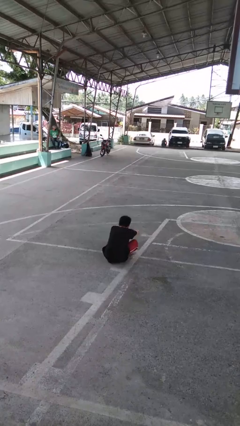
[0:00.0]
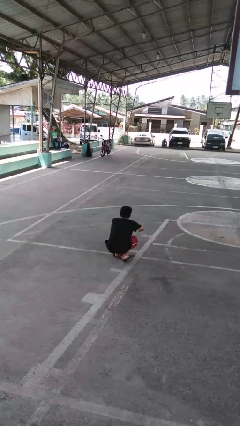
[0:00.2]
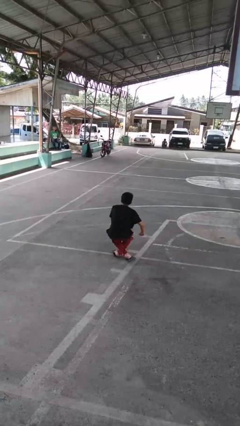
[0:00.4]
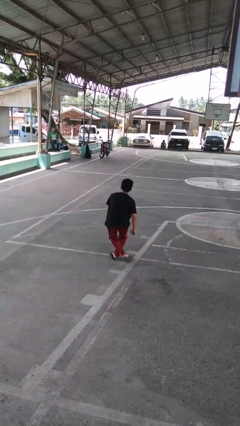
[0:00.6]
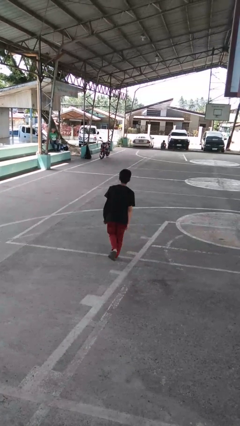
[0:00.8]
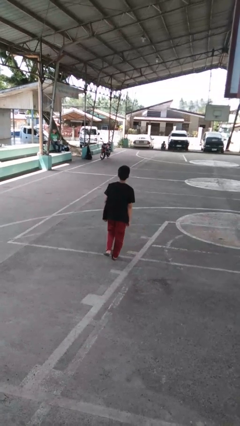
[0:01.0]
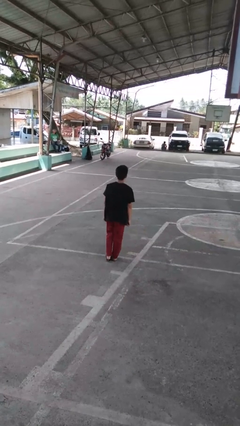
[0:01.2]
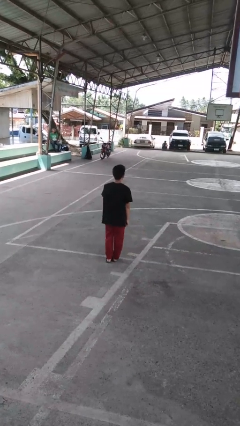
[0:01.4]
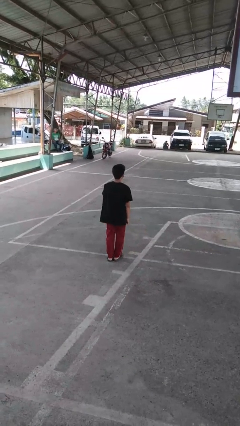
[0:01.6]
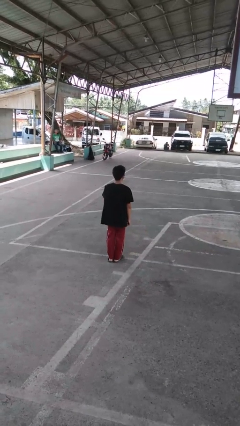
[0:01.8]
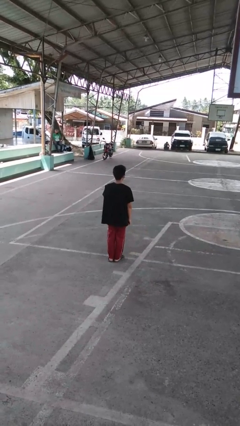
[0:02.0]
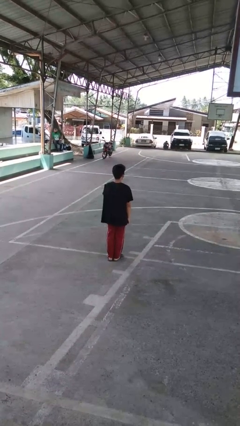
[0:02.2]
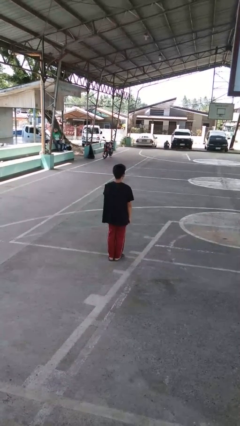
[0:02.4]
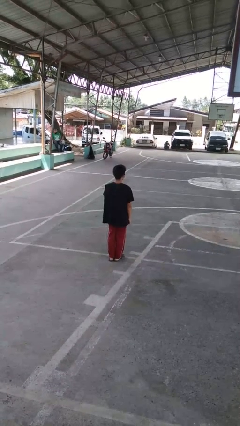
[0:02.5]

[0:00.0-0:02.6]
person stands up from floor

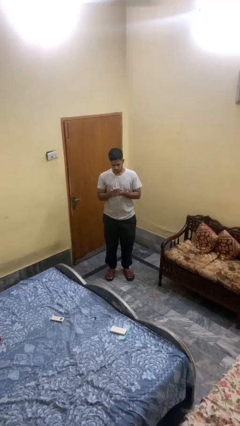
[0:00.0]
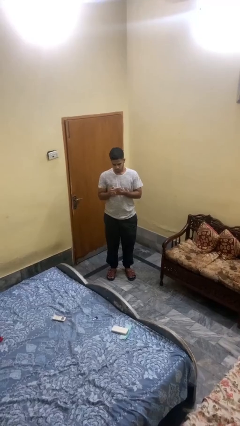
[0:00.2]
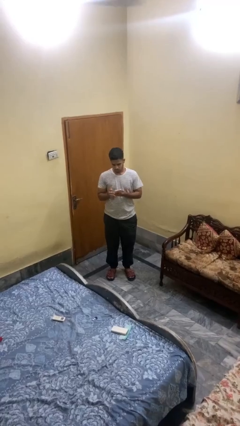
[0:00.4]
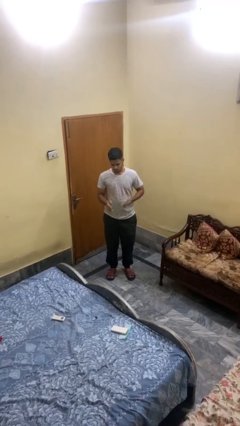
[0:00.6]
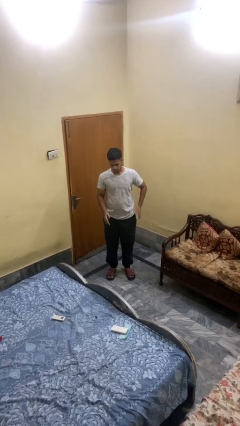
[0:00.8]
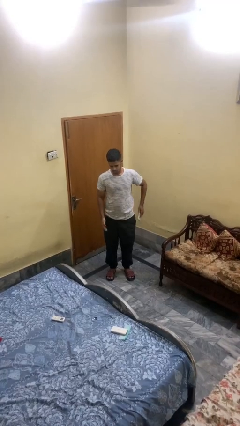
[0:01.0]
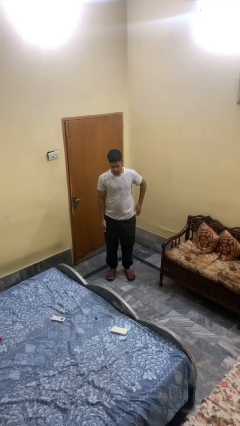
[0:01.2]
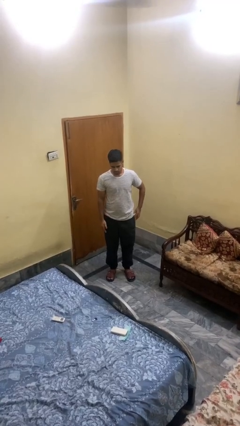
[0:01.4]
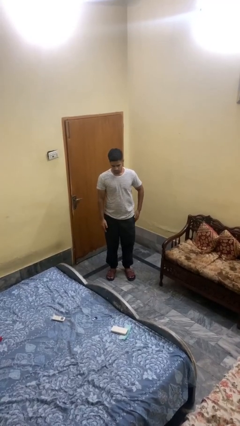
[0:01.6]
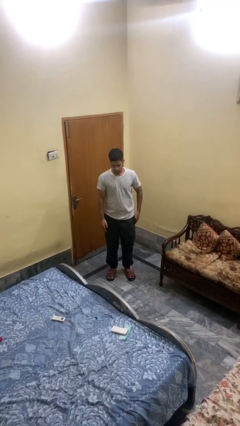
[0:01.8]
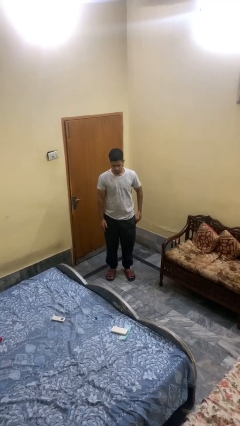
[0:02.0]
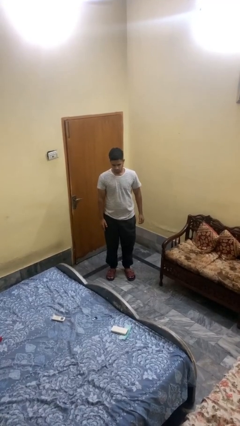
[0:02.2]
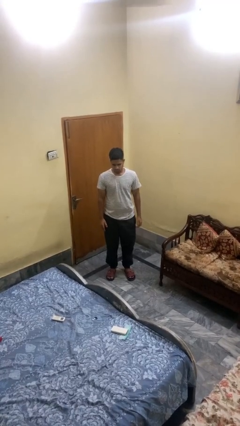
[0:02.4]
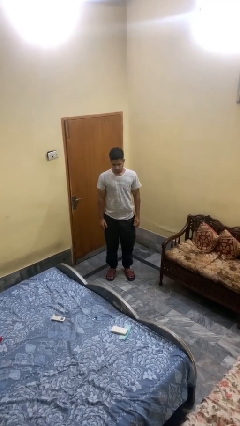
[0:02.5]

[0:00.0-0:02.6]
person puts phone into pocket

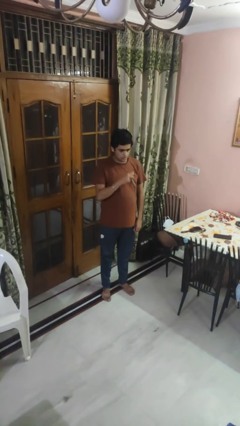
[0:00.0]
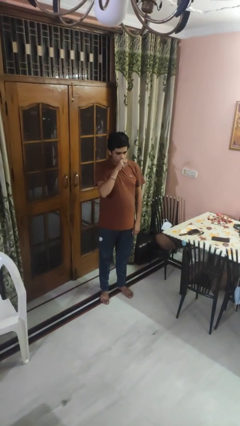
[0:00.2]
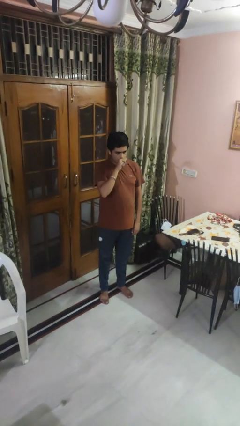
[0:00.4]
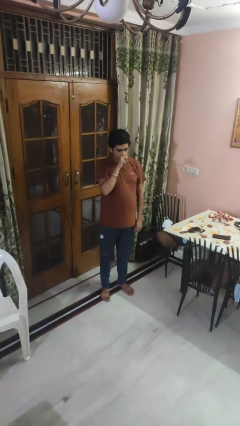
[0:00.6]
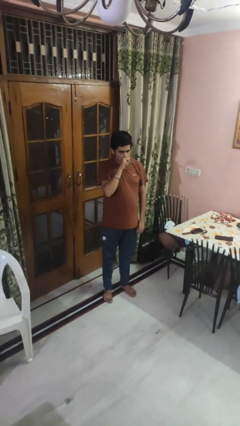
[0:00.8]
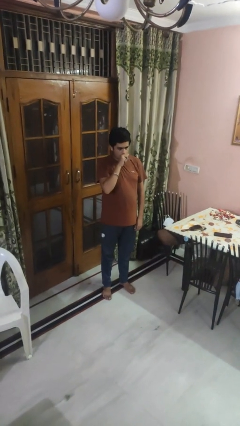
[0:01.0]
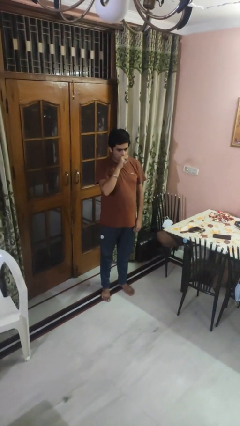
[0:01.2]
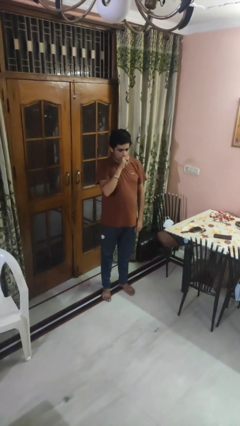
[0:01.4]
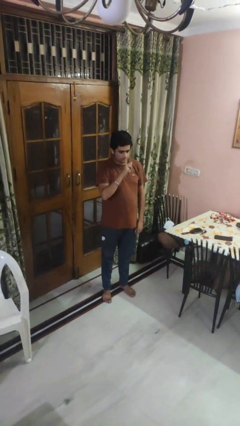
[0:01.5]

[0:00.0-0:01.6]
person vapes

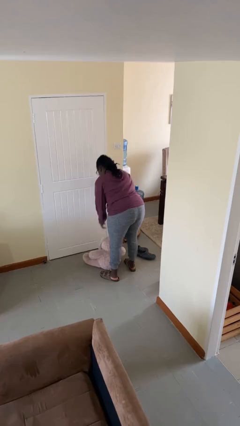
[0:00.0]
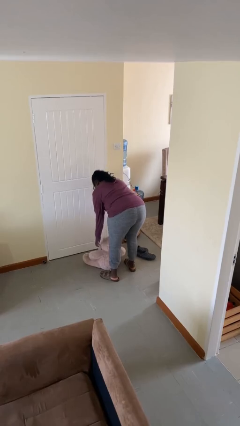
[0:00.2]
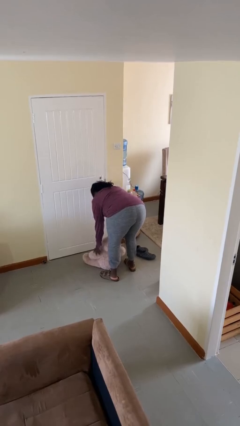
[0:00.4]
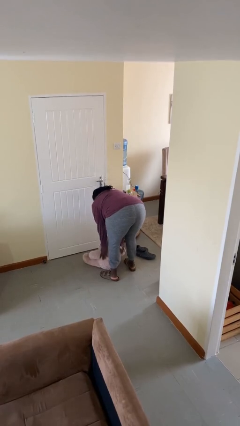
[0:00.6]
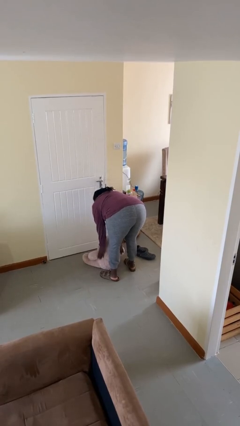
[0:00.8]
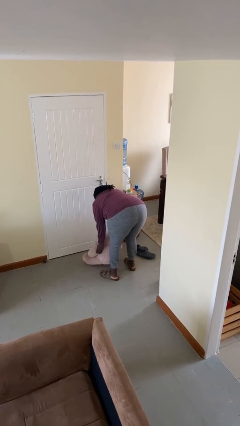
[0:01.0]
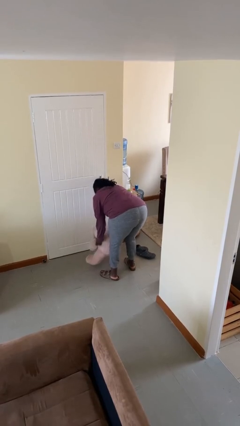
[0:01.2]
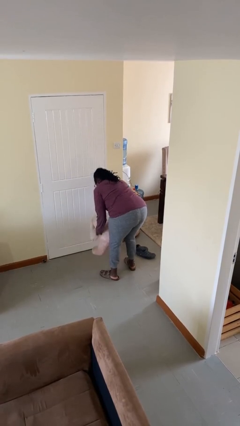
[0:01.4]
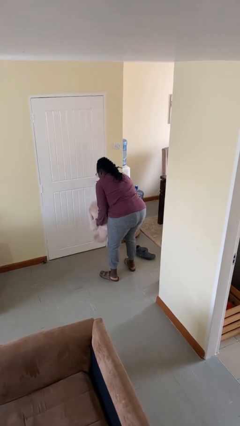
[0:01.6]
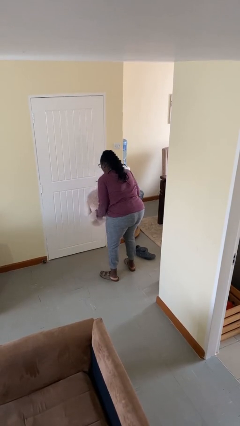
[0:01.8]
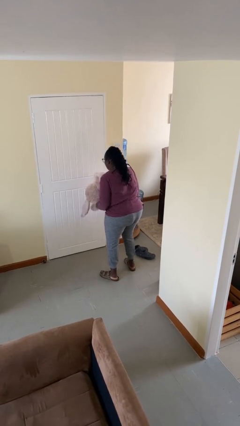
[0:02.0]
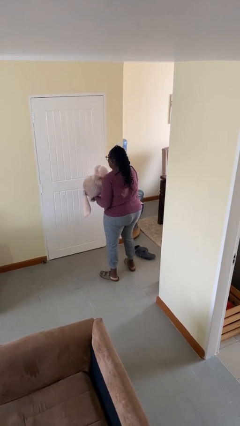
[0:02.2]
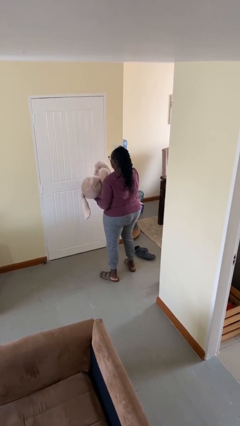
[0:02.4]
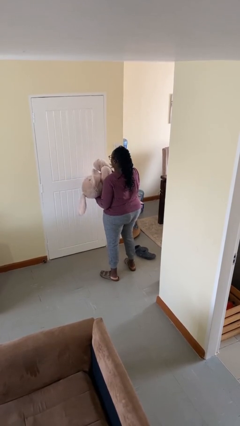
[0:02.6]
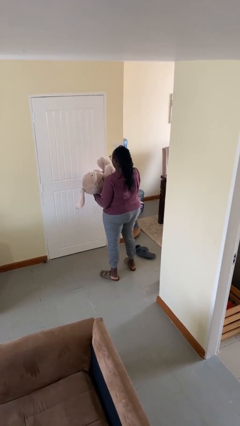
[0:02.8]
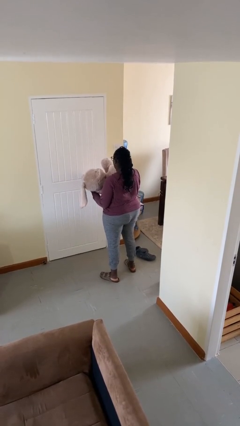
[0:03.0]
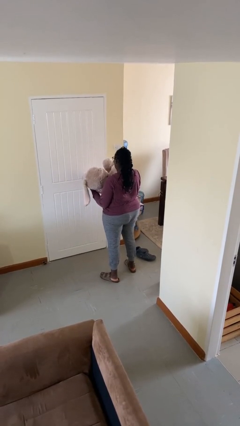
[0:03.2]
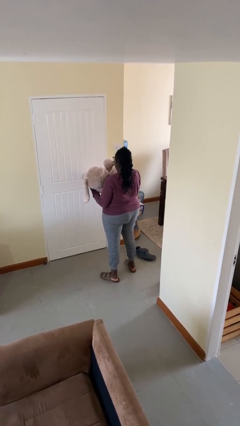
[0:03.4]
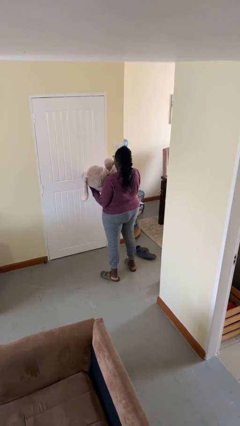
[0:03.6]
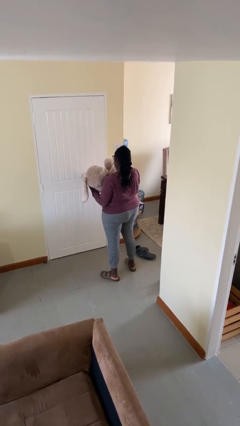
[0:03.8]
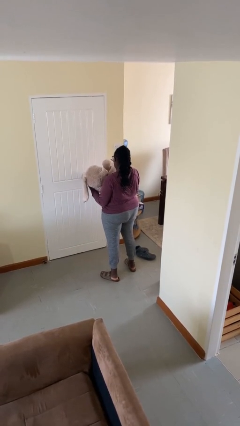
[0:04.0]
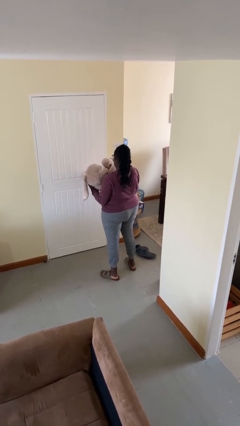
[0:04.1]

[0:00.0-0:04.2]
person picks up object from floor

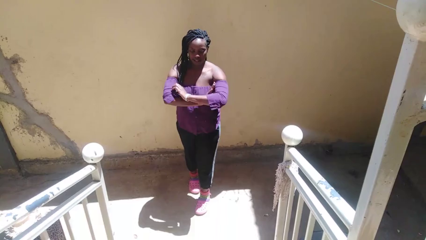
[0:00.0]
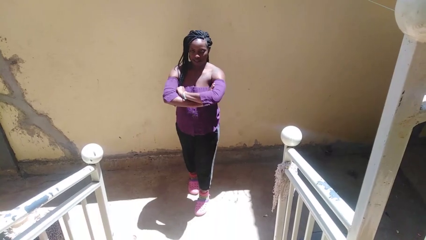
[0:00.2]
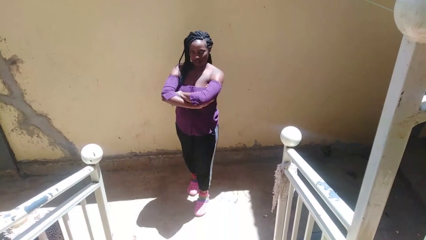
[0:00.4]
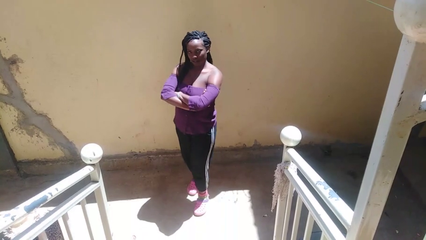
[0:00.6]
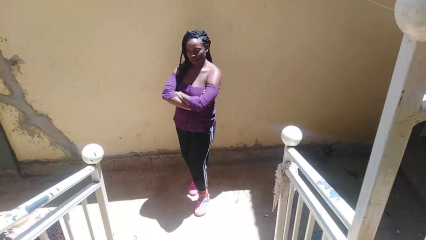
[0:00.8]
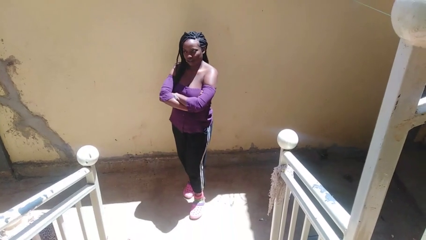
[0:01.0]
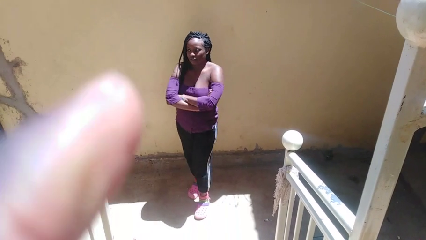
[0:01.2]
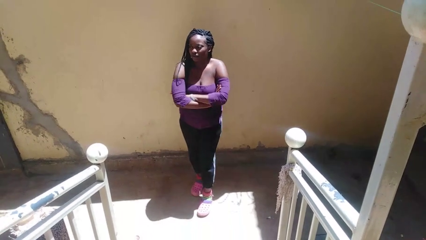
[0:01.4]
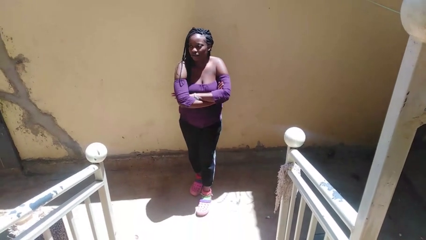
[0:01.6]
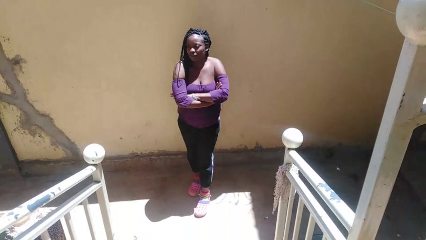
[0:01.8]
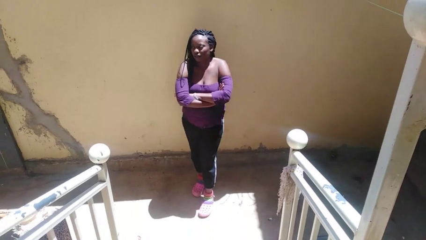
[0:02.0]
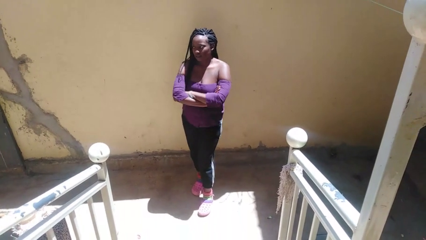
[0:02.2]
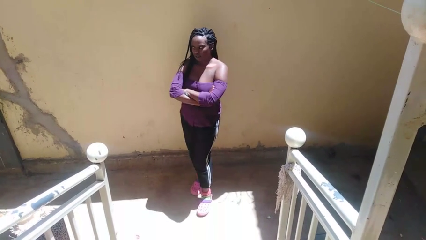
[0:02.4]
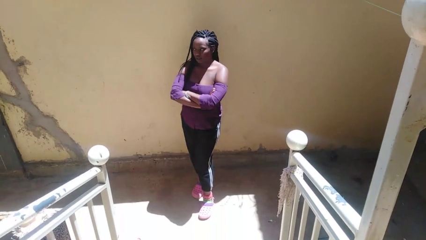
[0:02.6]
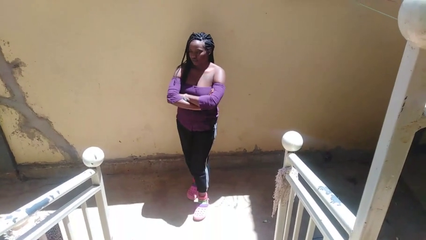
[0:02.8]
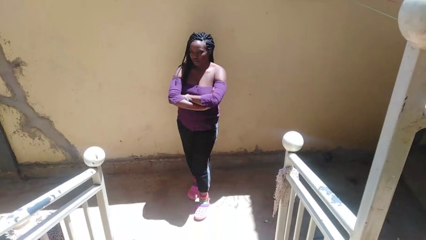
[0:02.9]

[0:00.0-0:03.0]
person crosses arms

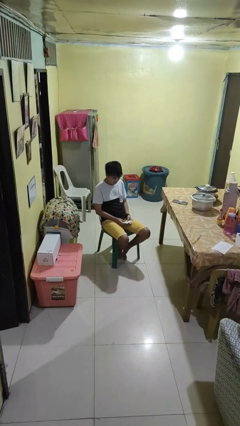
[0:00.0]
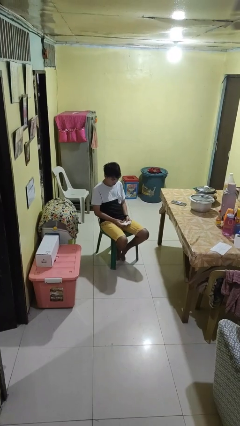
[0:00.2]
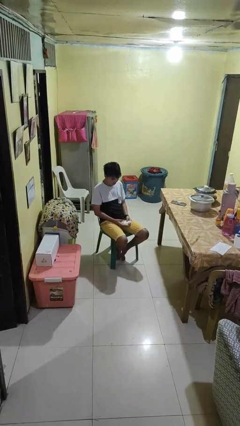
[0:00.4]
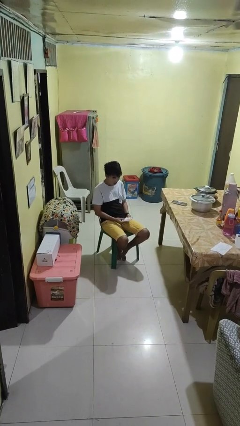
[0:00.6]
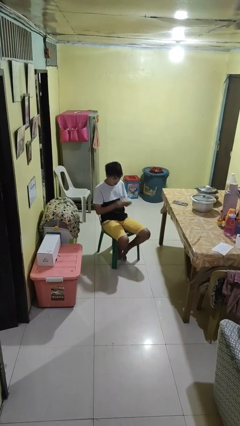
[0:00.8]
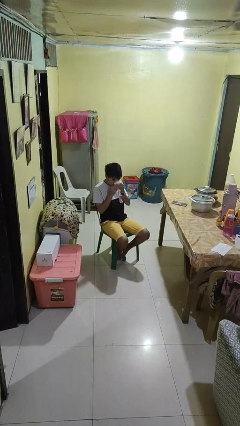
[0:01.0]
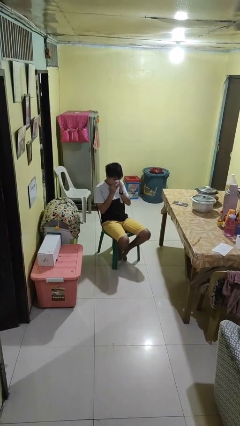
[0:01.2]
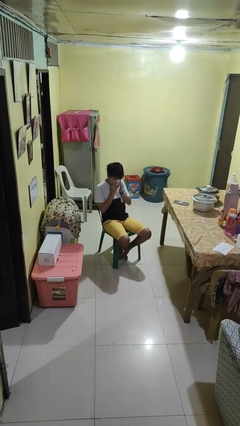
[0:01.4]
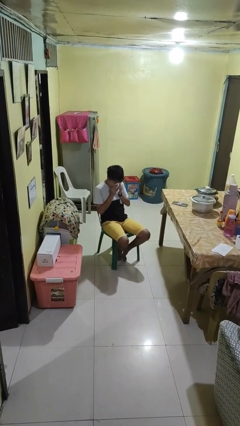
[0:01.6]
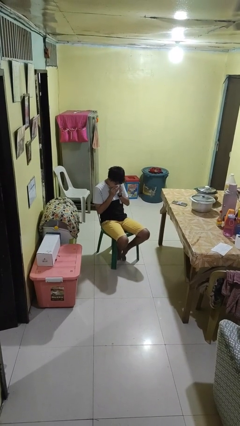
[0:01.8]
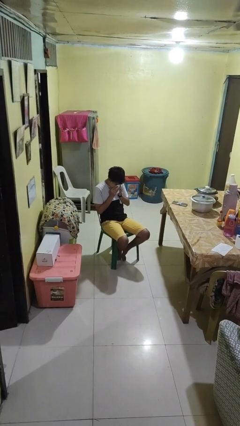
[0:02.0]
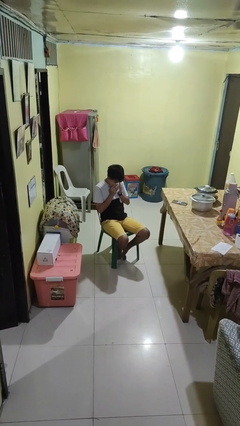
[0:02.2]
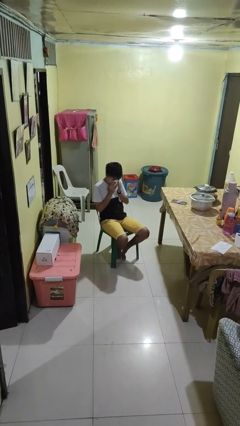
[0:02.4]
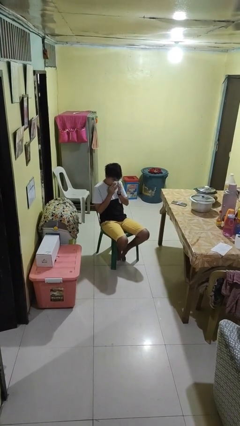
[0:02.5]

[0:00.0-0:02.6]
person blows nose

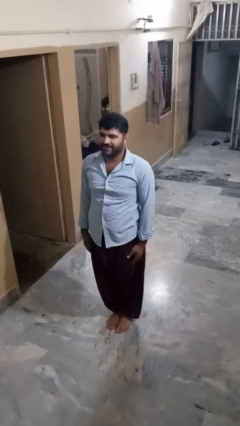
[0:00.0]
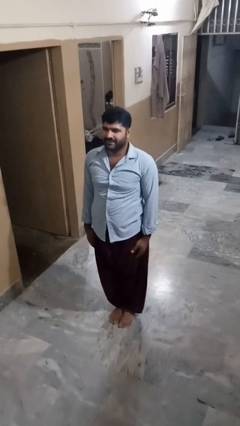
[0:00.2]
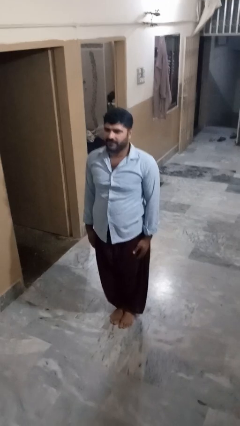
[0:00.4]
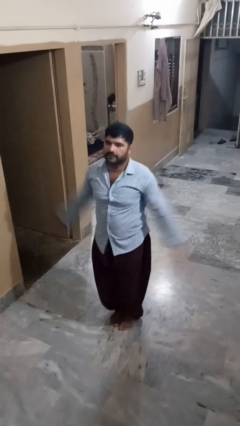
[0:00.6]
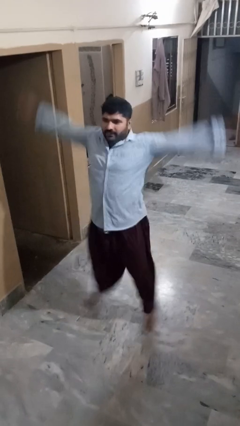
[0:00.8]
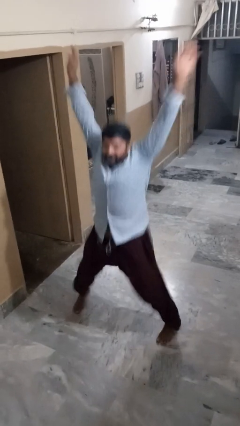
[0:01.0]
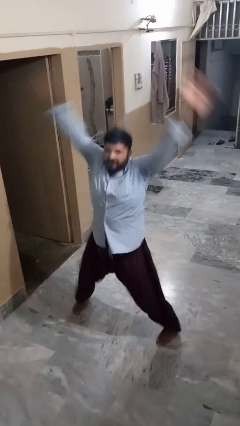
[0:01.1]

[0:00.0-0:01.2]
person exercises with jumping jacks
